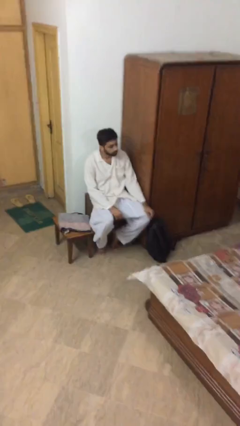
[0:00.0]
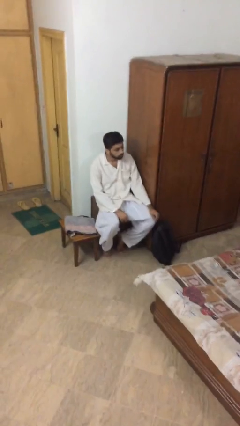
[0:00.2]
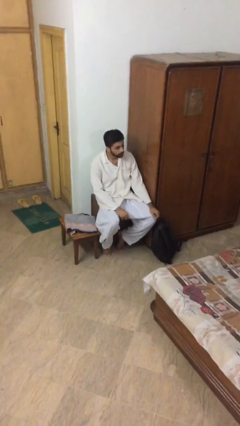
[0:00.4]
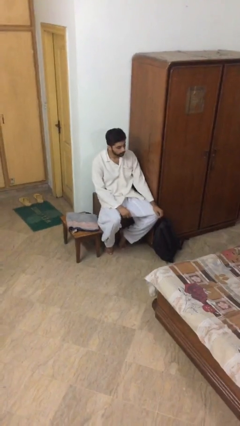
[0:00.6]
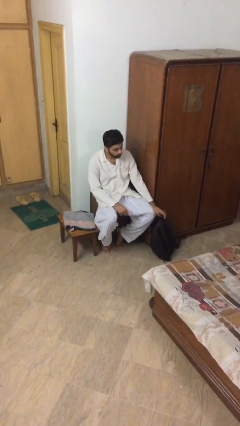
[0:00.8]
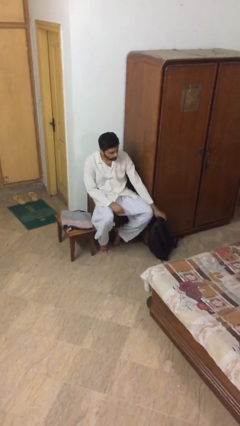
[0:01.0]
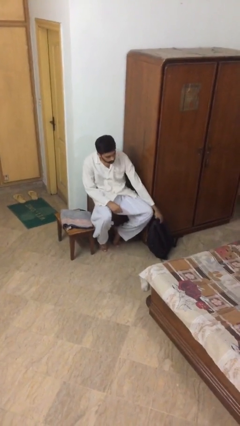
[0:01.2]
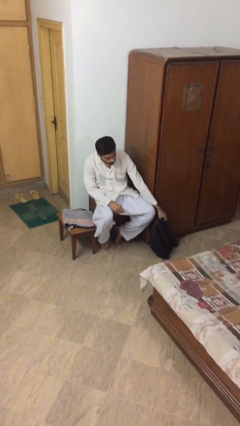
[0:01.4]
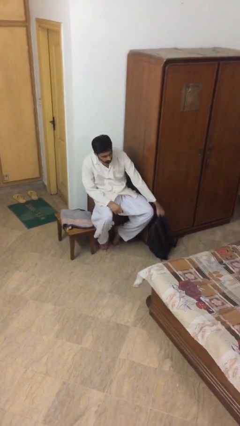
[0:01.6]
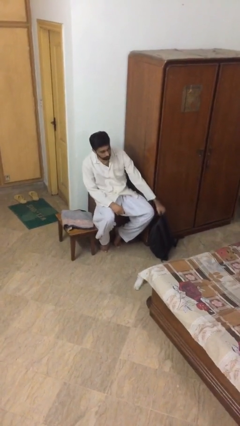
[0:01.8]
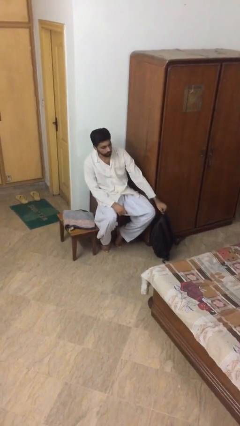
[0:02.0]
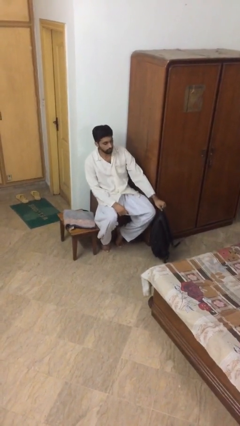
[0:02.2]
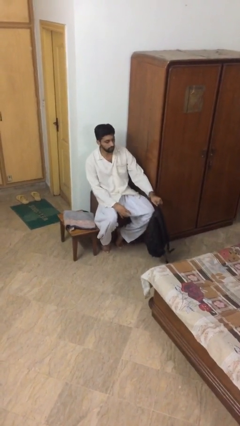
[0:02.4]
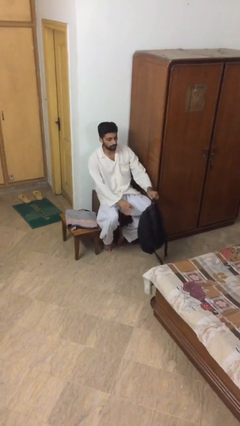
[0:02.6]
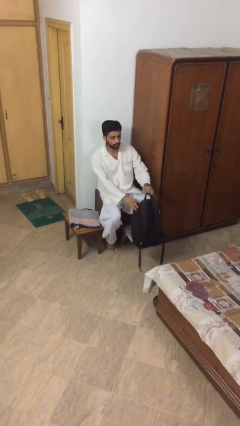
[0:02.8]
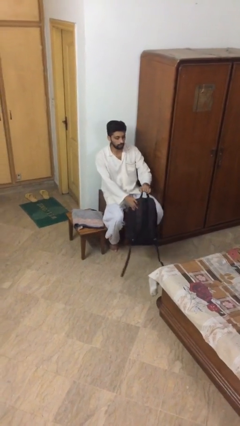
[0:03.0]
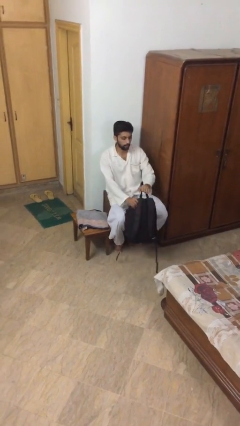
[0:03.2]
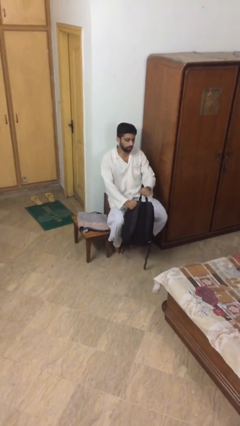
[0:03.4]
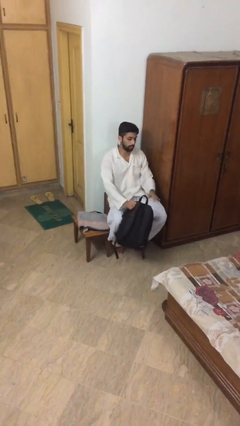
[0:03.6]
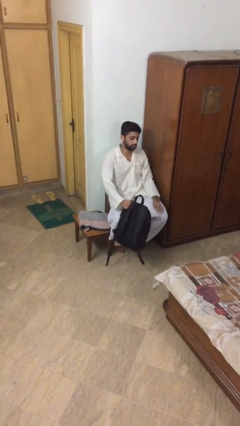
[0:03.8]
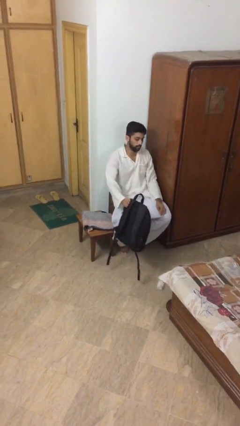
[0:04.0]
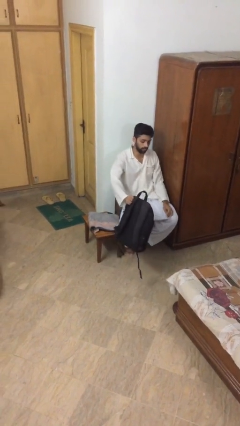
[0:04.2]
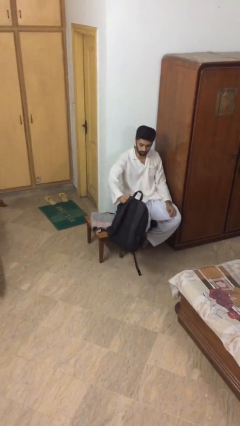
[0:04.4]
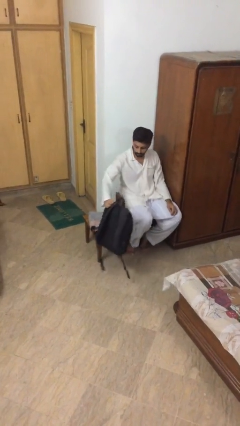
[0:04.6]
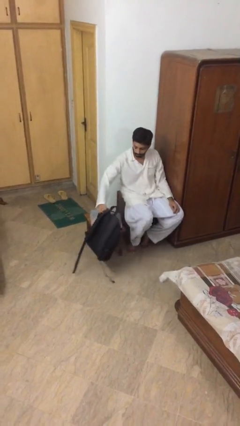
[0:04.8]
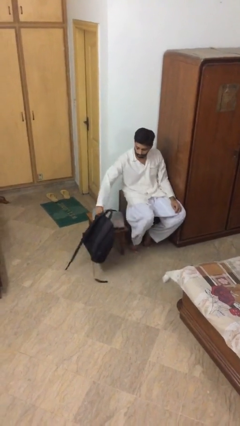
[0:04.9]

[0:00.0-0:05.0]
person picks up object from floor

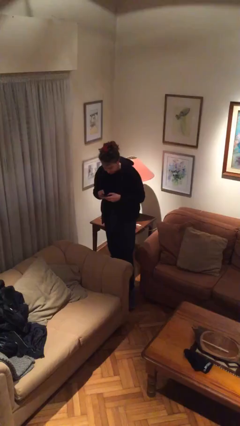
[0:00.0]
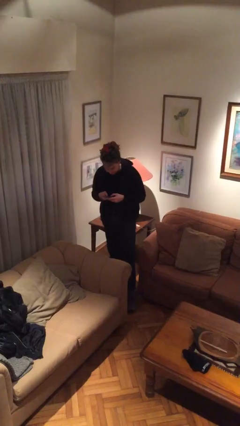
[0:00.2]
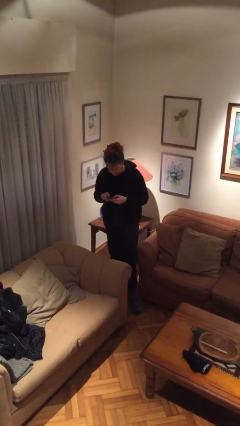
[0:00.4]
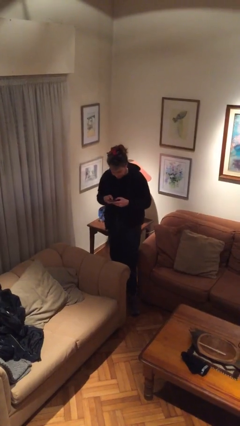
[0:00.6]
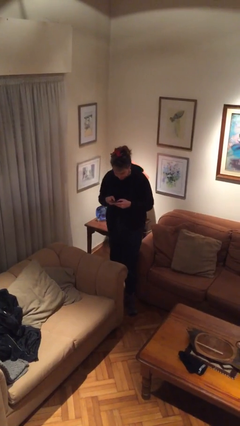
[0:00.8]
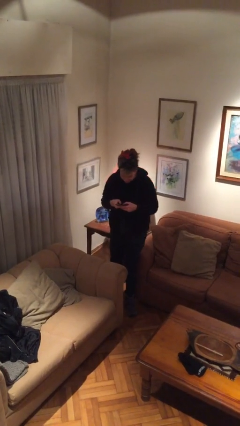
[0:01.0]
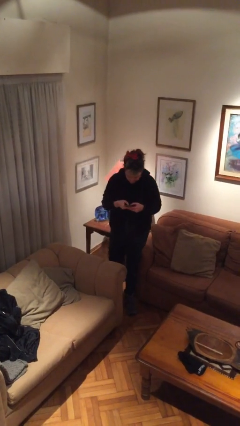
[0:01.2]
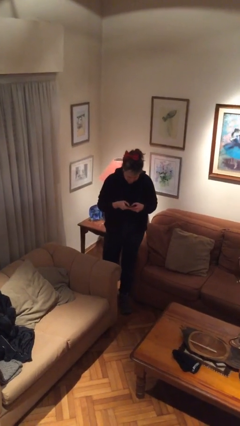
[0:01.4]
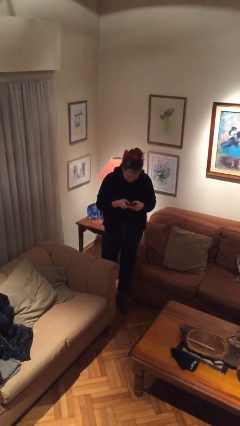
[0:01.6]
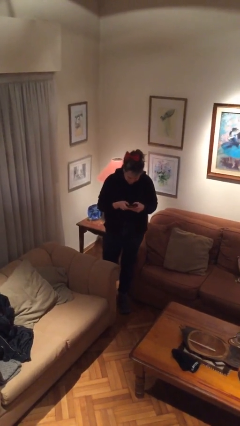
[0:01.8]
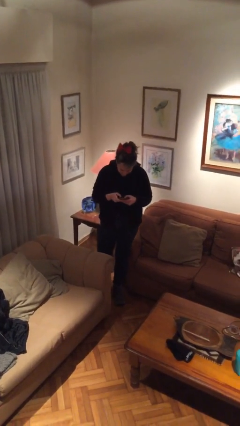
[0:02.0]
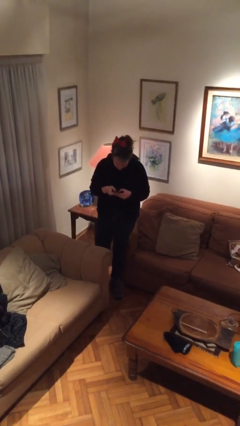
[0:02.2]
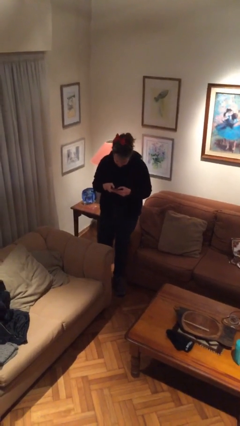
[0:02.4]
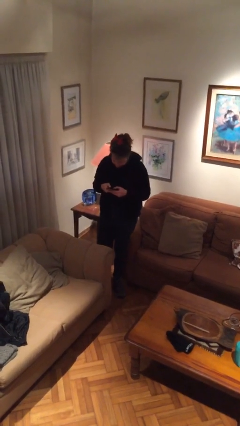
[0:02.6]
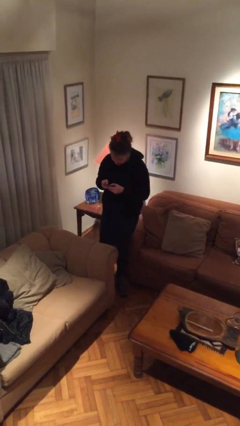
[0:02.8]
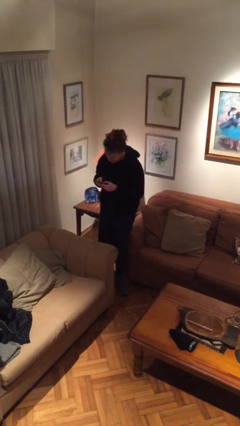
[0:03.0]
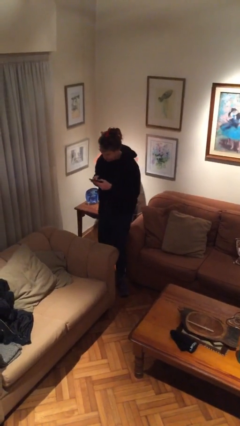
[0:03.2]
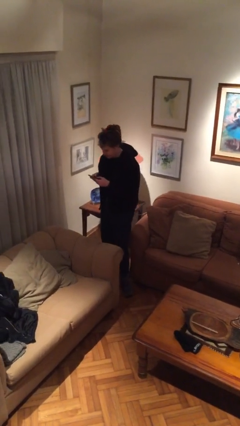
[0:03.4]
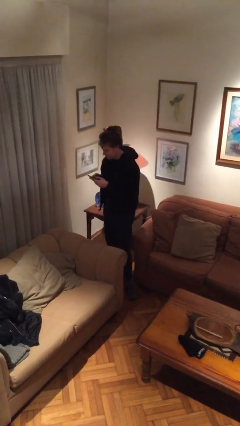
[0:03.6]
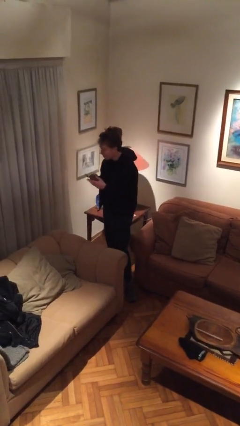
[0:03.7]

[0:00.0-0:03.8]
person texts on phone

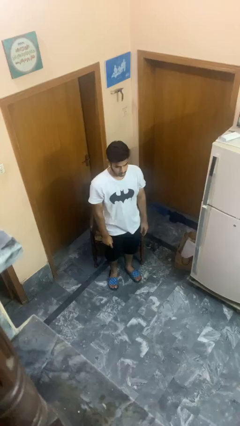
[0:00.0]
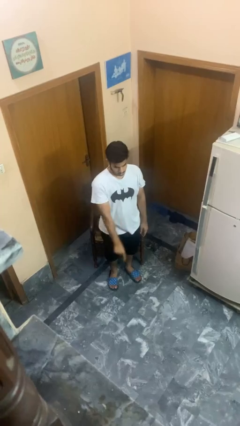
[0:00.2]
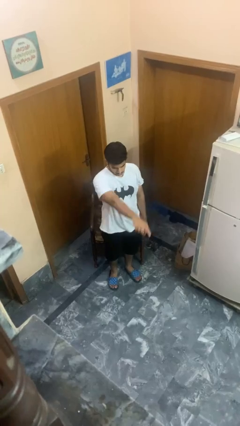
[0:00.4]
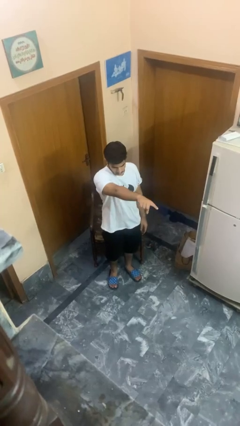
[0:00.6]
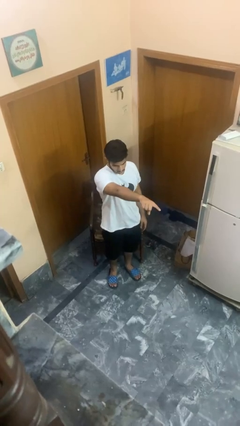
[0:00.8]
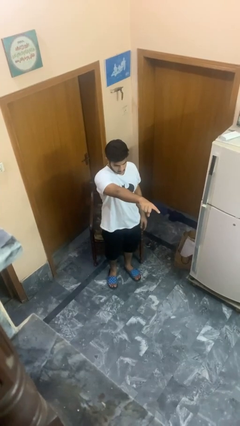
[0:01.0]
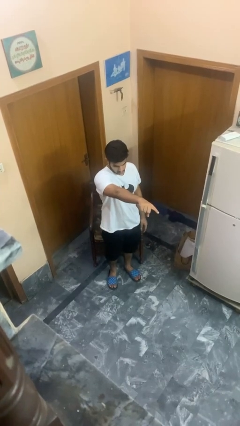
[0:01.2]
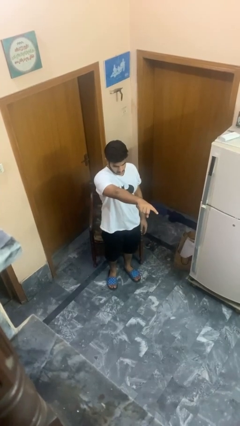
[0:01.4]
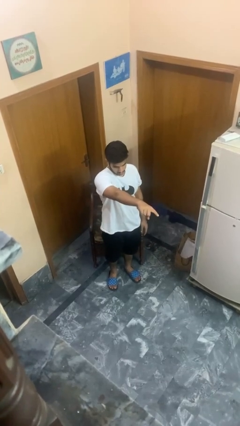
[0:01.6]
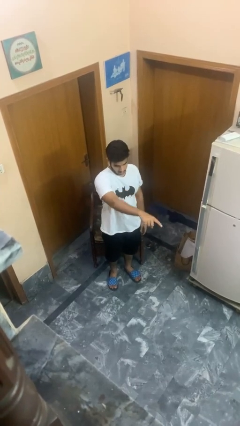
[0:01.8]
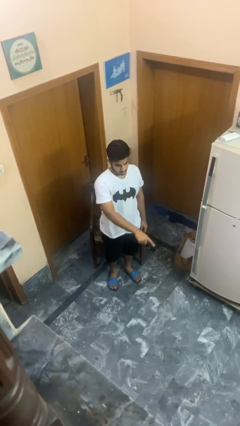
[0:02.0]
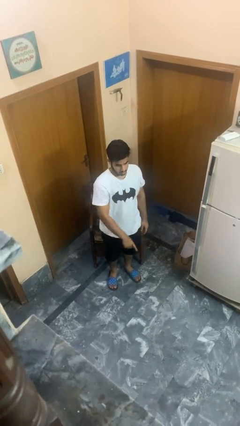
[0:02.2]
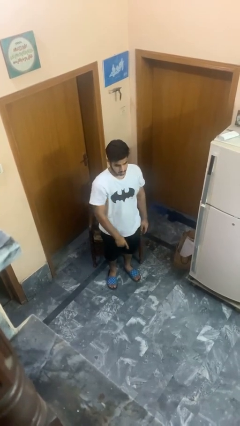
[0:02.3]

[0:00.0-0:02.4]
person points at person

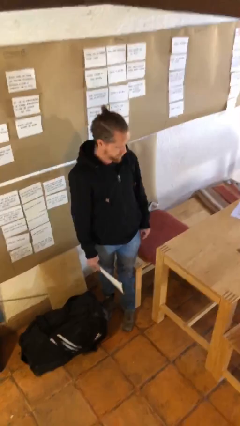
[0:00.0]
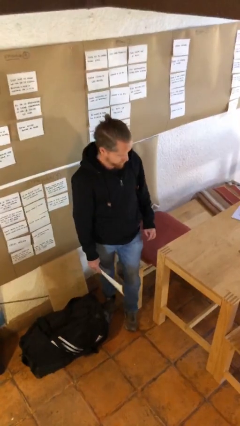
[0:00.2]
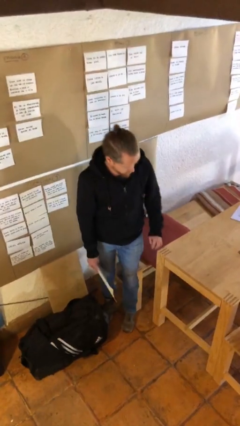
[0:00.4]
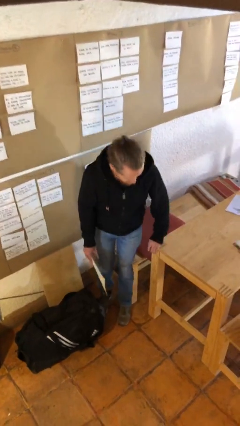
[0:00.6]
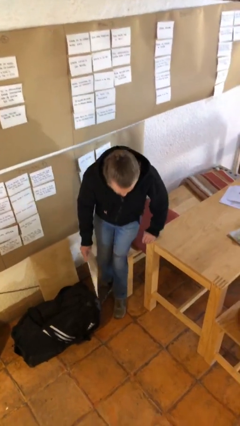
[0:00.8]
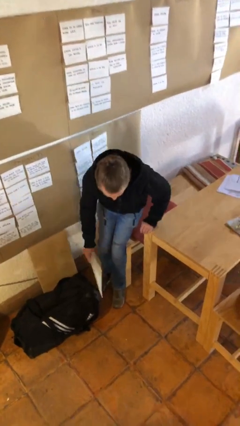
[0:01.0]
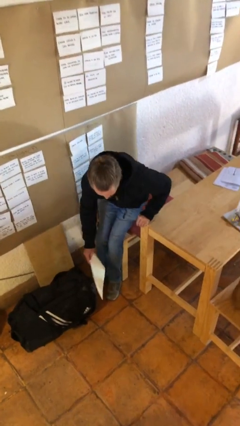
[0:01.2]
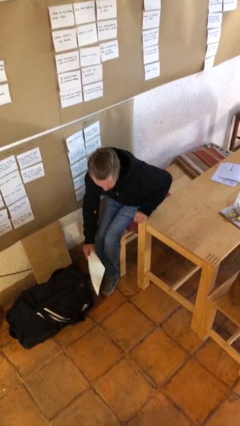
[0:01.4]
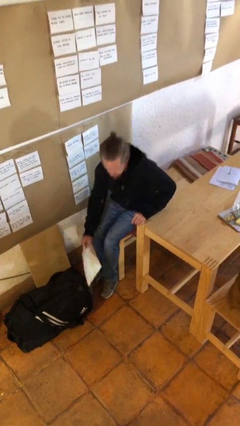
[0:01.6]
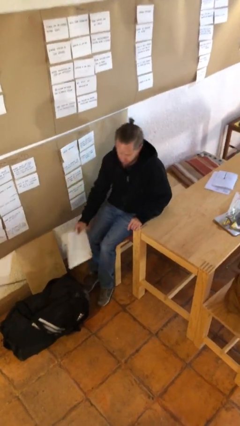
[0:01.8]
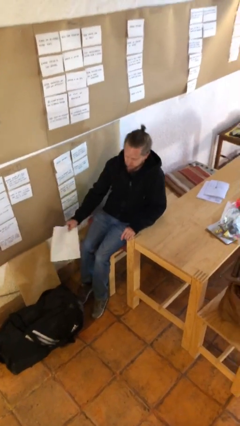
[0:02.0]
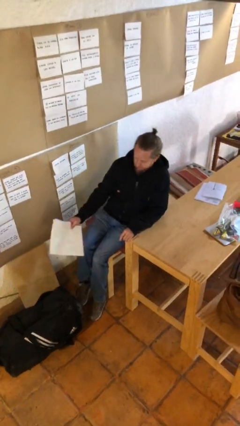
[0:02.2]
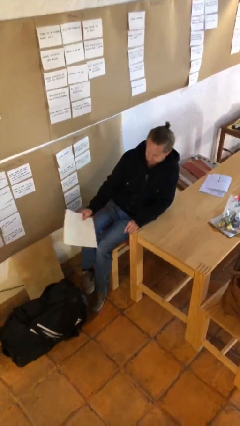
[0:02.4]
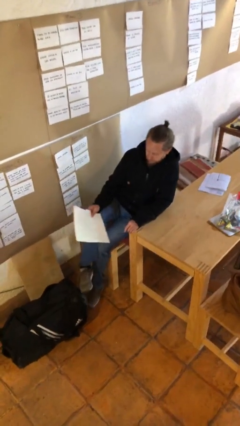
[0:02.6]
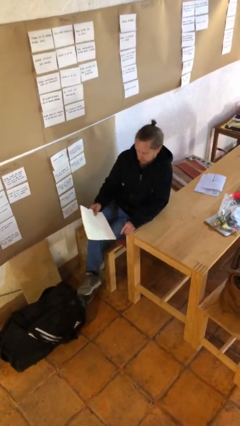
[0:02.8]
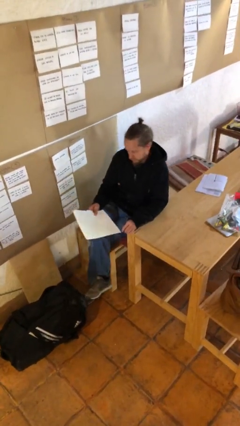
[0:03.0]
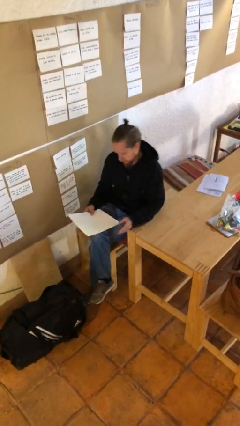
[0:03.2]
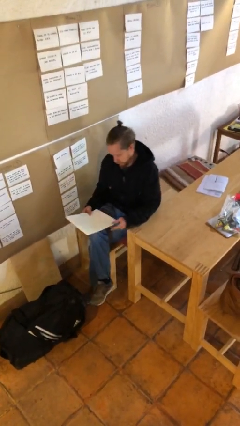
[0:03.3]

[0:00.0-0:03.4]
person sits down

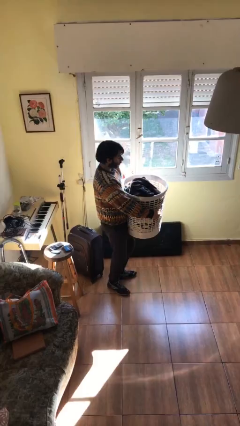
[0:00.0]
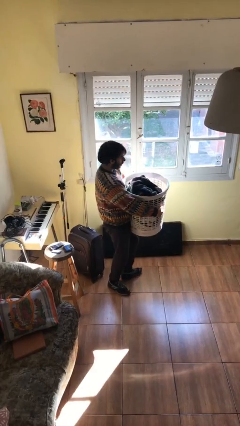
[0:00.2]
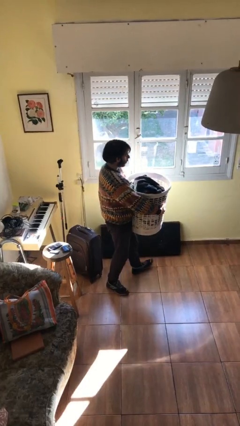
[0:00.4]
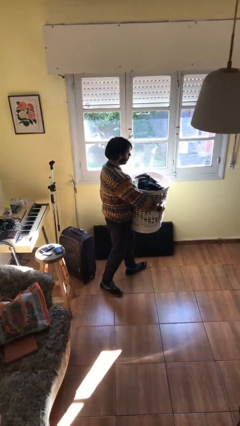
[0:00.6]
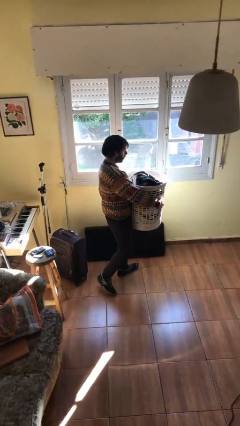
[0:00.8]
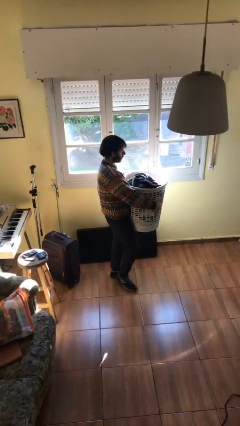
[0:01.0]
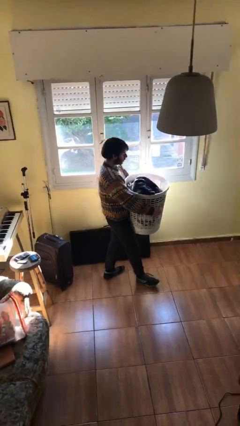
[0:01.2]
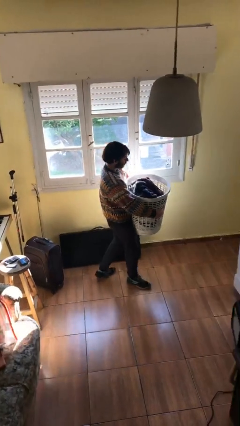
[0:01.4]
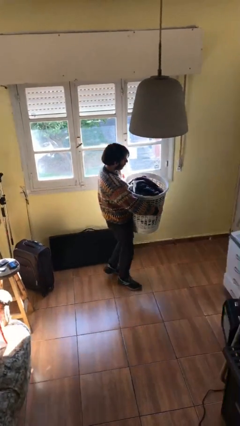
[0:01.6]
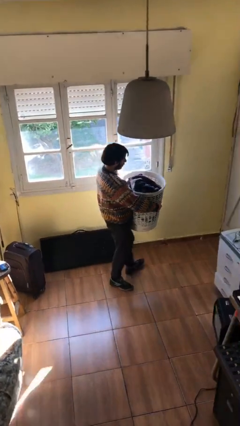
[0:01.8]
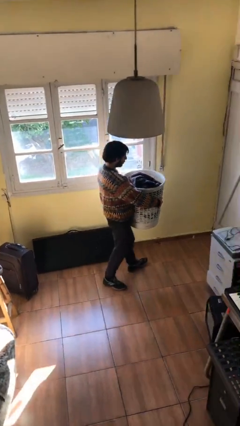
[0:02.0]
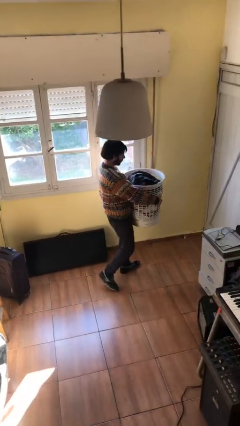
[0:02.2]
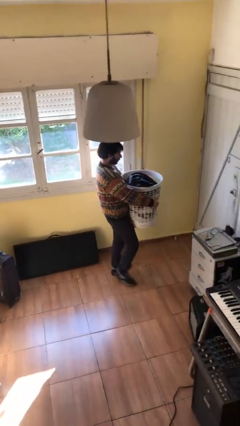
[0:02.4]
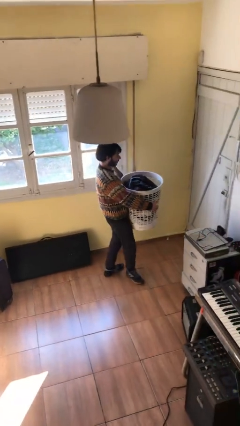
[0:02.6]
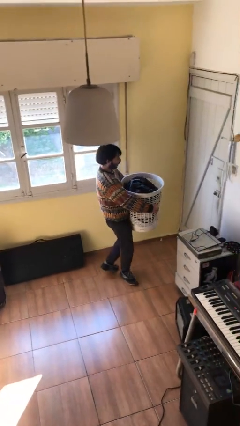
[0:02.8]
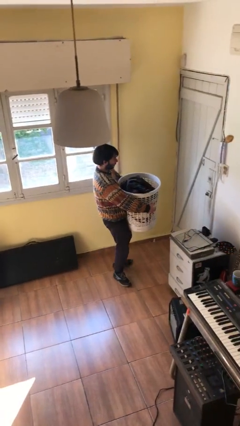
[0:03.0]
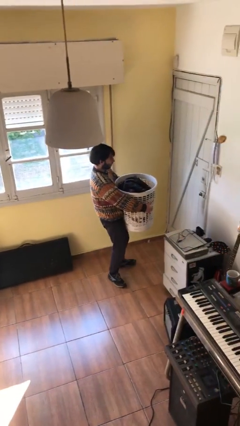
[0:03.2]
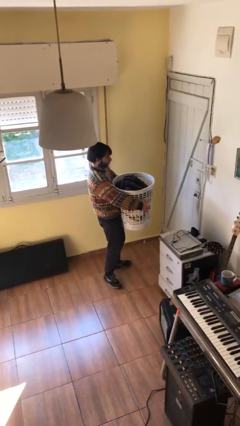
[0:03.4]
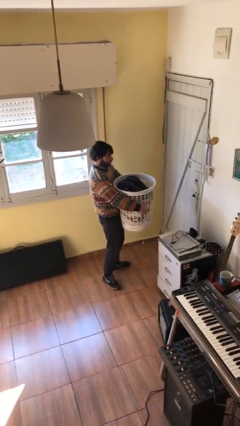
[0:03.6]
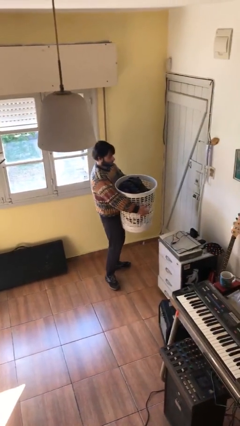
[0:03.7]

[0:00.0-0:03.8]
person carries laundry basket
